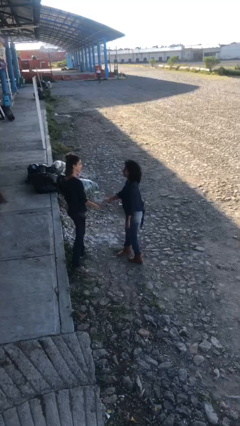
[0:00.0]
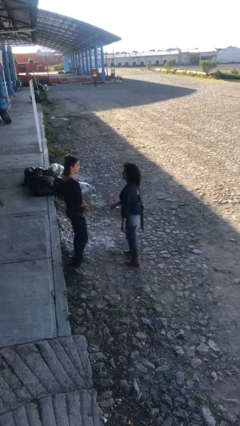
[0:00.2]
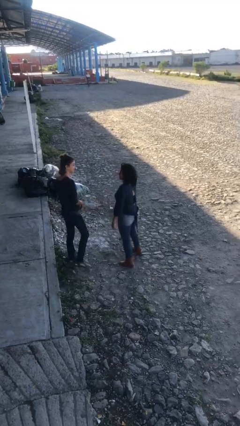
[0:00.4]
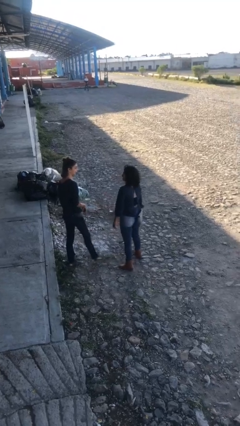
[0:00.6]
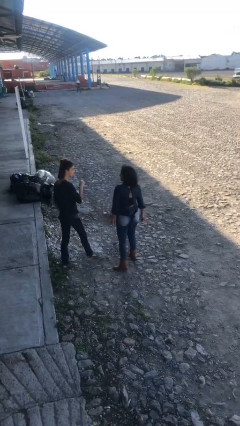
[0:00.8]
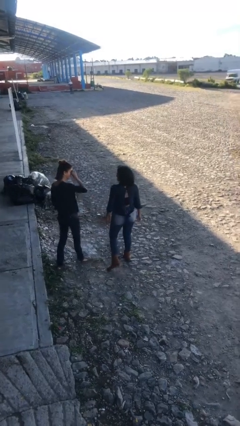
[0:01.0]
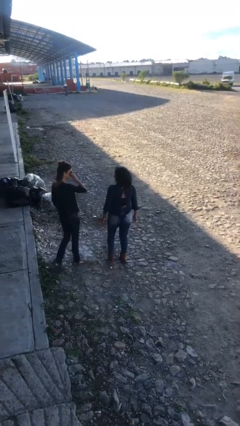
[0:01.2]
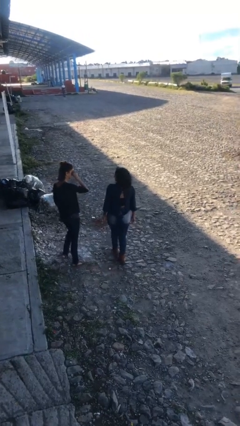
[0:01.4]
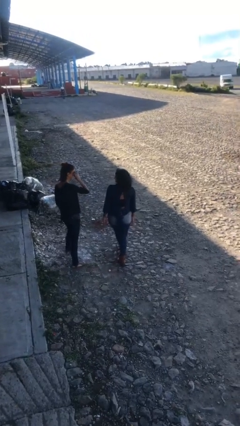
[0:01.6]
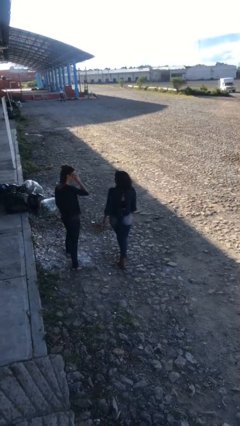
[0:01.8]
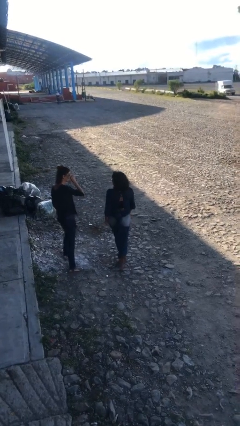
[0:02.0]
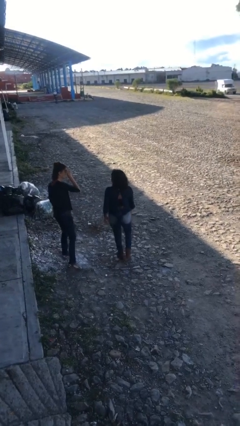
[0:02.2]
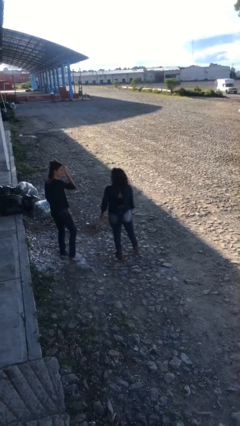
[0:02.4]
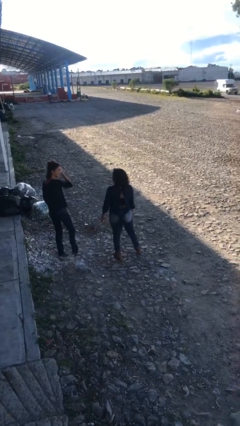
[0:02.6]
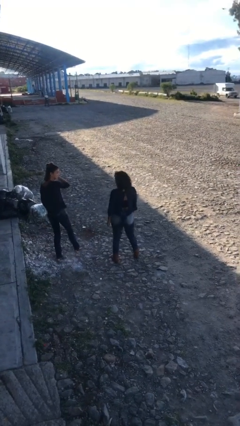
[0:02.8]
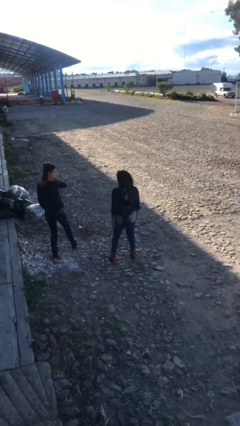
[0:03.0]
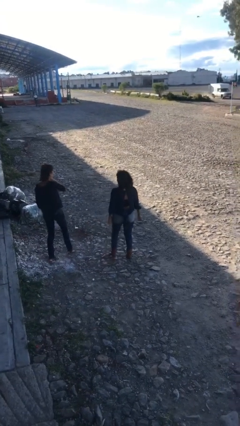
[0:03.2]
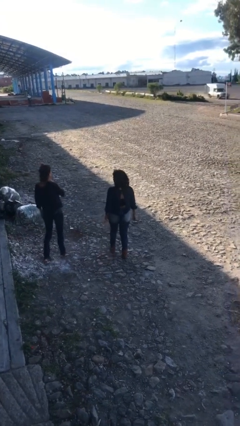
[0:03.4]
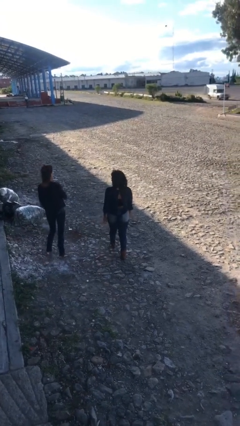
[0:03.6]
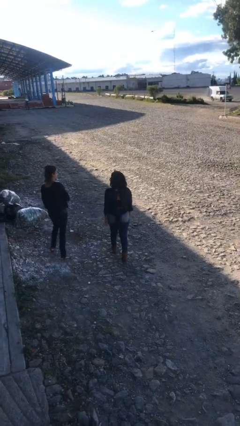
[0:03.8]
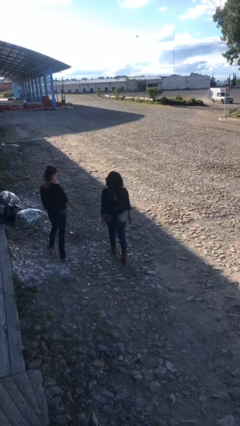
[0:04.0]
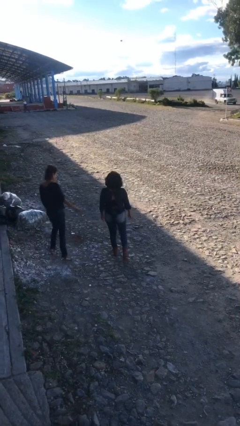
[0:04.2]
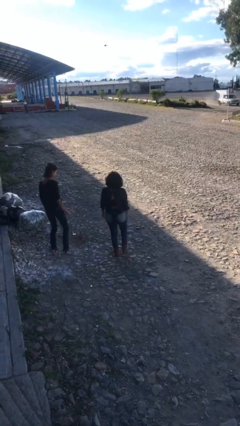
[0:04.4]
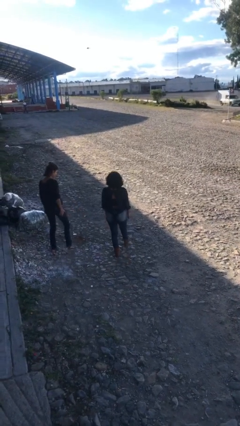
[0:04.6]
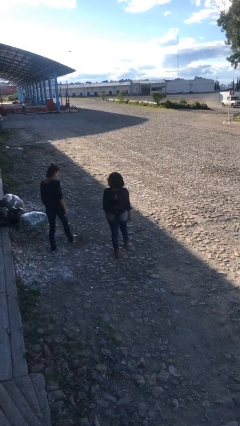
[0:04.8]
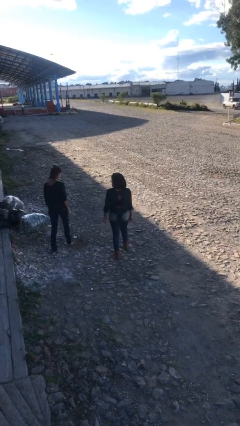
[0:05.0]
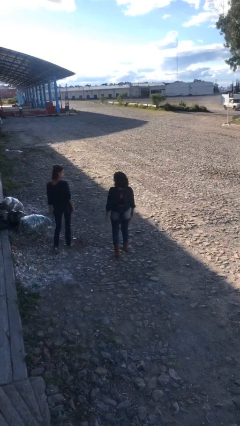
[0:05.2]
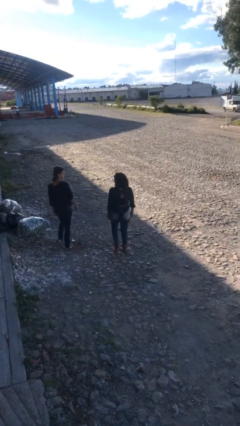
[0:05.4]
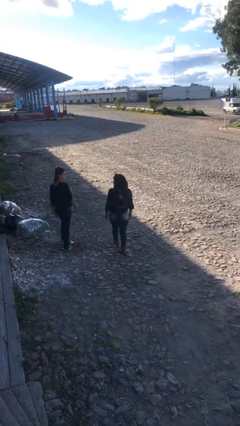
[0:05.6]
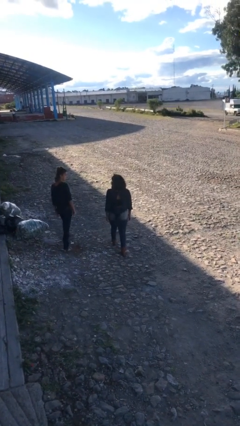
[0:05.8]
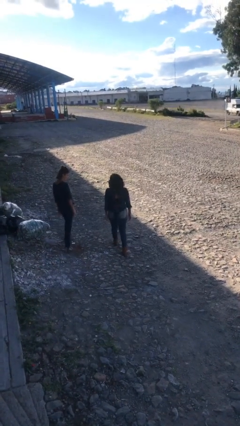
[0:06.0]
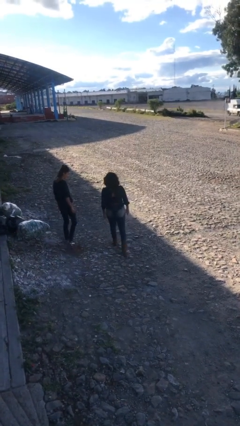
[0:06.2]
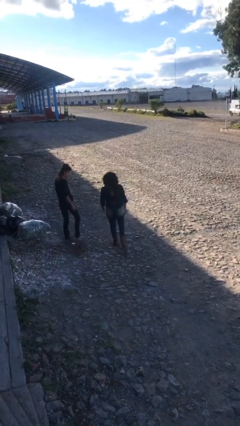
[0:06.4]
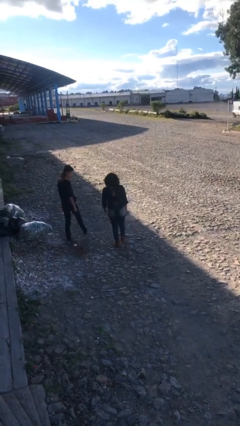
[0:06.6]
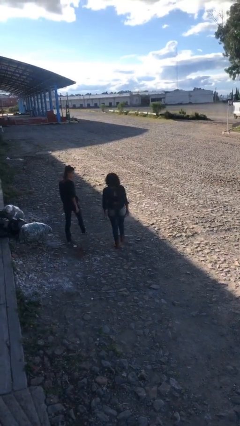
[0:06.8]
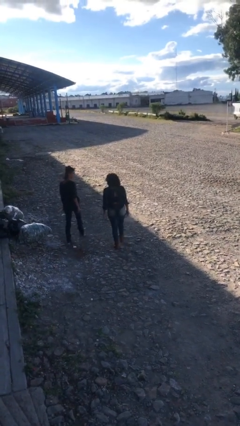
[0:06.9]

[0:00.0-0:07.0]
person talks to person

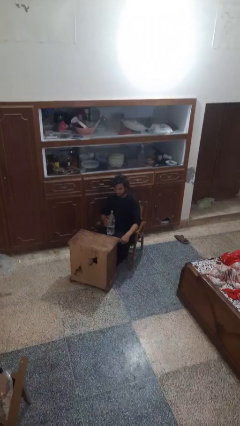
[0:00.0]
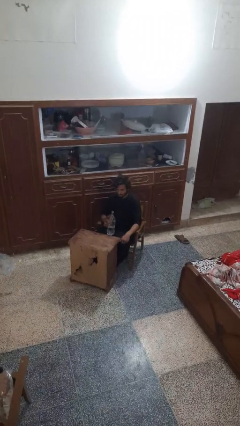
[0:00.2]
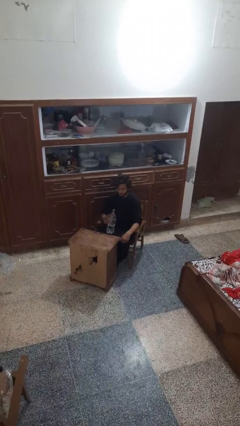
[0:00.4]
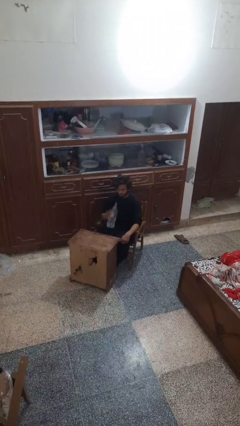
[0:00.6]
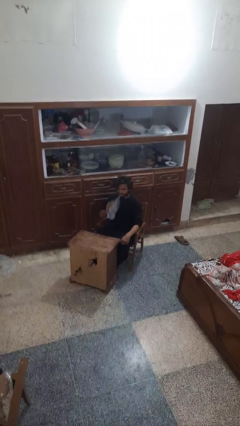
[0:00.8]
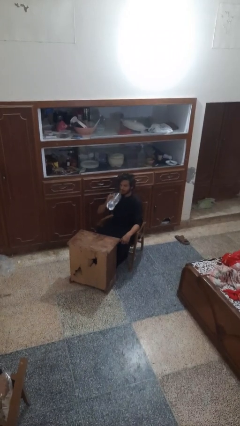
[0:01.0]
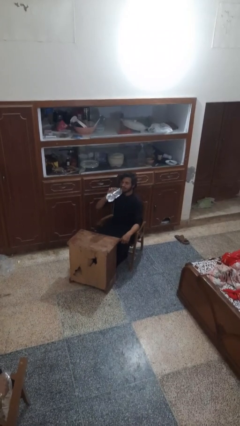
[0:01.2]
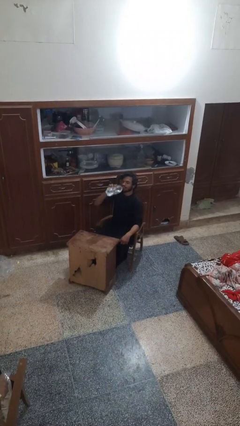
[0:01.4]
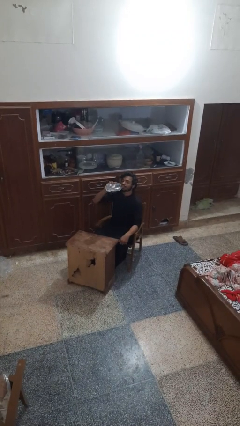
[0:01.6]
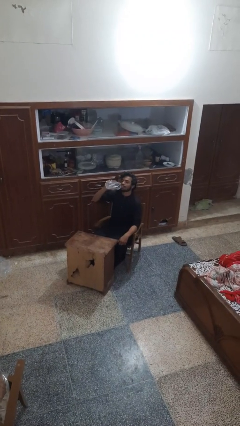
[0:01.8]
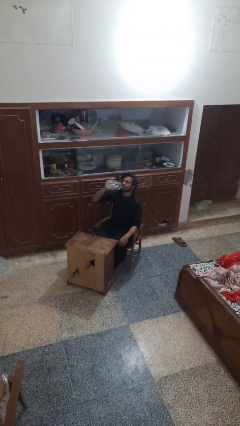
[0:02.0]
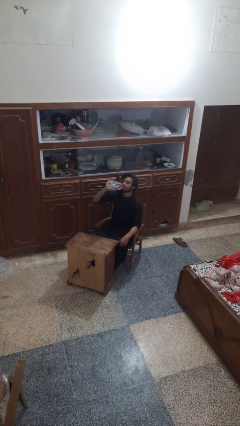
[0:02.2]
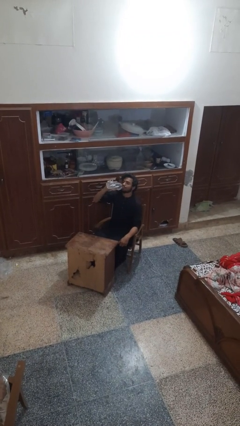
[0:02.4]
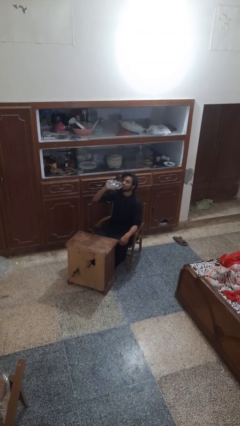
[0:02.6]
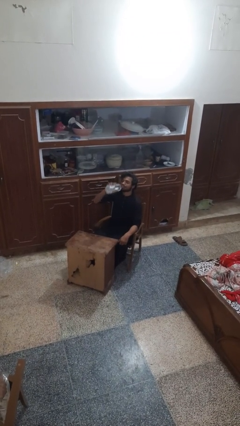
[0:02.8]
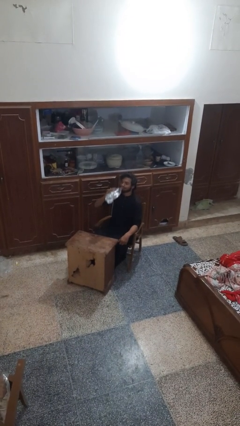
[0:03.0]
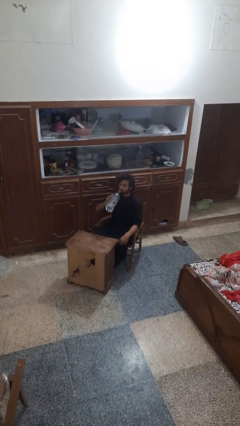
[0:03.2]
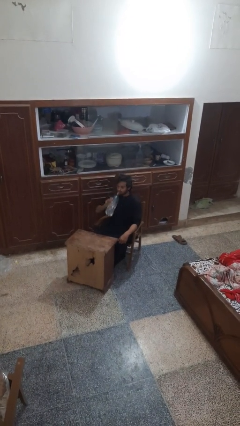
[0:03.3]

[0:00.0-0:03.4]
person drinks from bottle

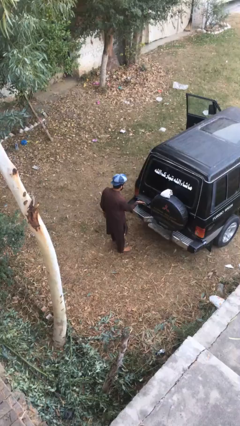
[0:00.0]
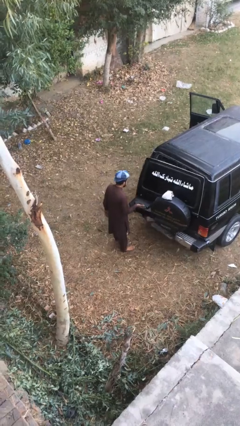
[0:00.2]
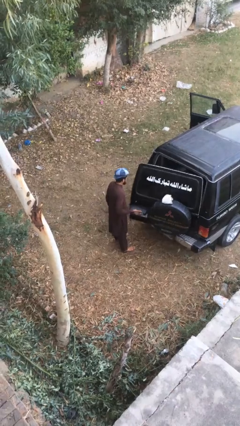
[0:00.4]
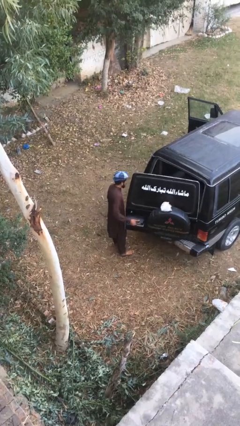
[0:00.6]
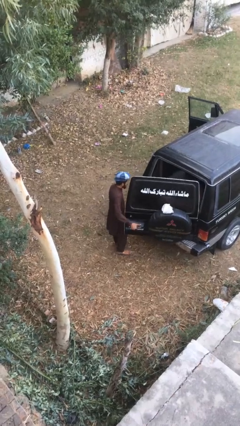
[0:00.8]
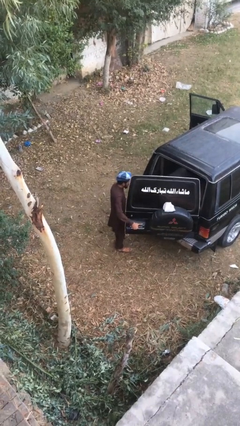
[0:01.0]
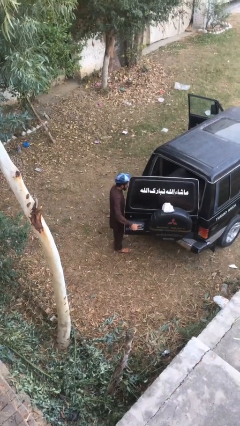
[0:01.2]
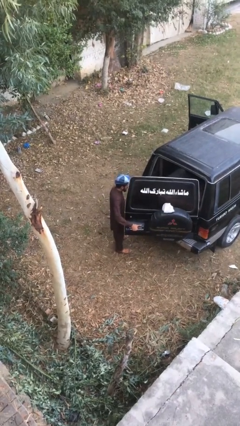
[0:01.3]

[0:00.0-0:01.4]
person opens car trunk

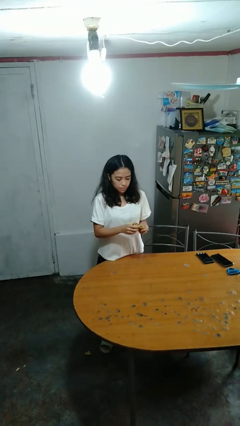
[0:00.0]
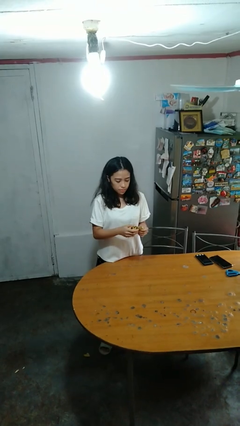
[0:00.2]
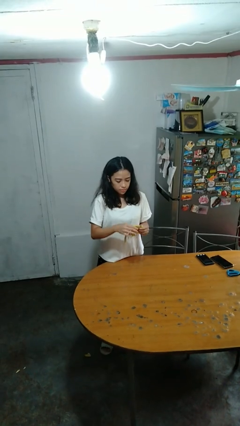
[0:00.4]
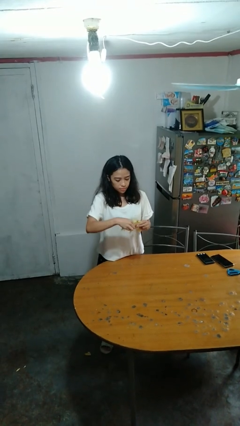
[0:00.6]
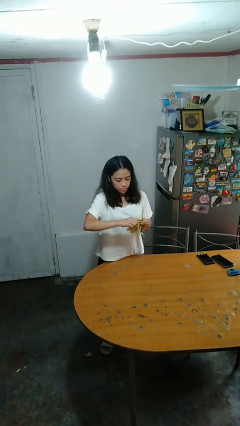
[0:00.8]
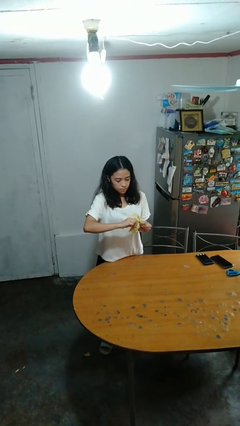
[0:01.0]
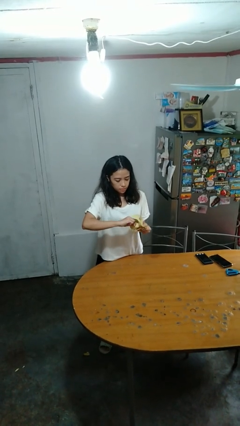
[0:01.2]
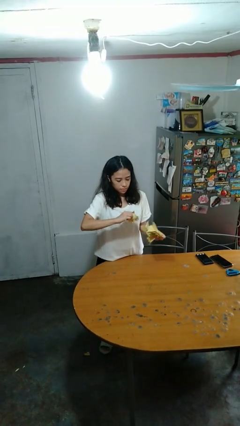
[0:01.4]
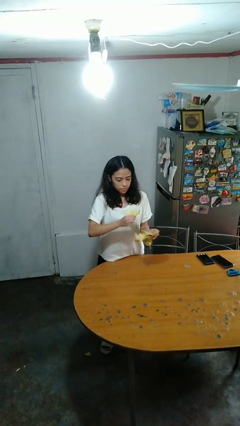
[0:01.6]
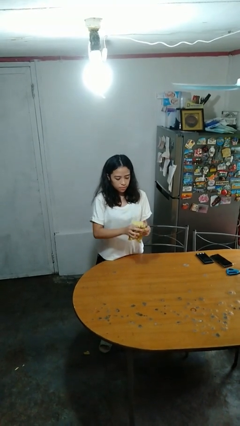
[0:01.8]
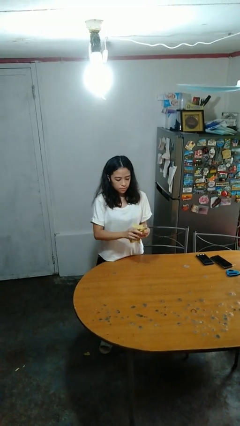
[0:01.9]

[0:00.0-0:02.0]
person tears paper

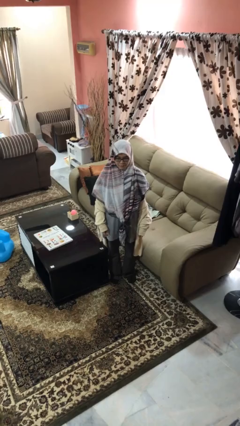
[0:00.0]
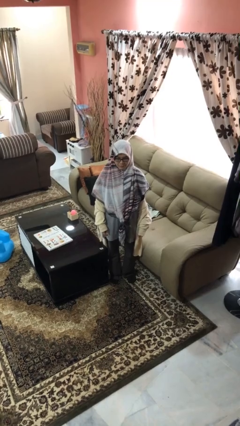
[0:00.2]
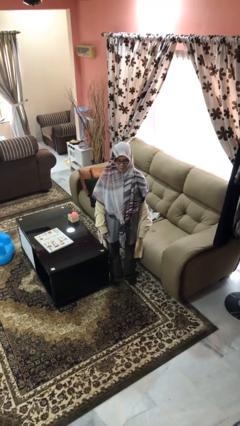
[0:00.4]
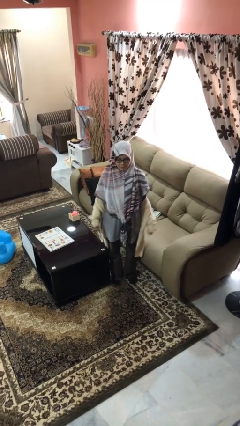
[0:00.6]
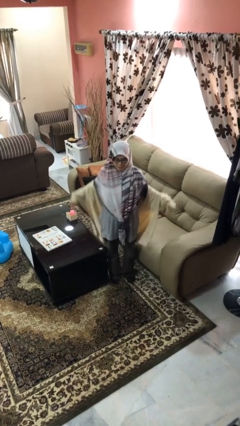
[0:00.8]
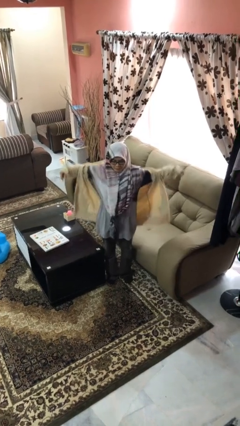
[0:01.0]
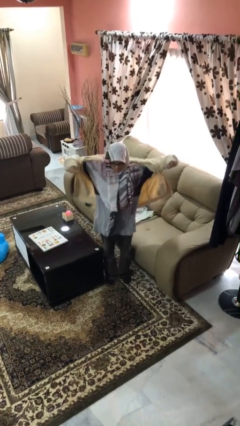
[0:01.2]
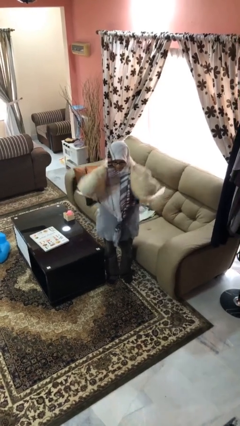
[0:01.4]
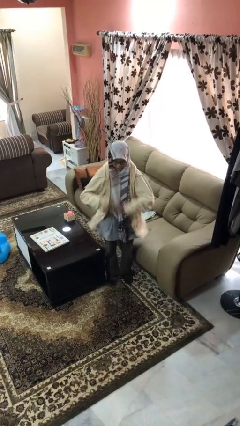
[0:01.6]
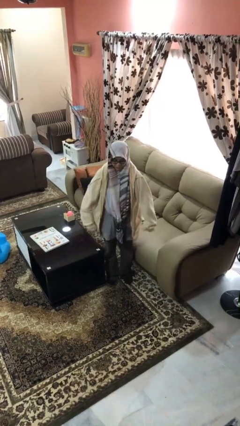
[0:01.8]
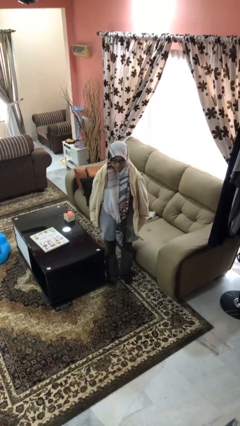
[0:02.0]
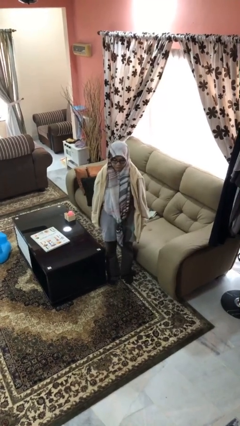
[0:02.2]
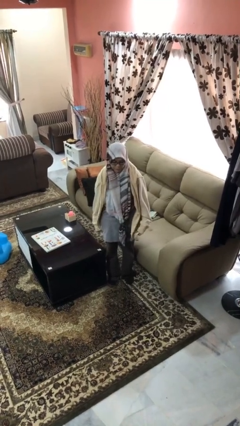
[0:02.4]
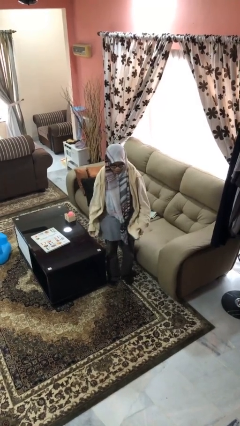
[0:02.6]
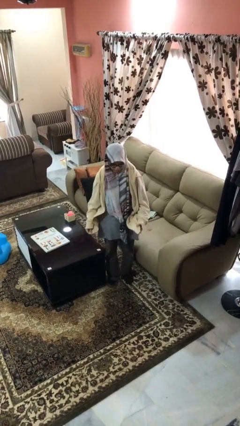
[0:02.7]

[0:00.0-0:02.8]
person puts on jacket

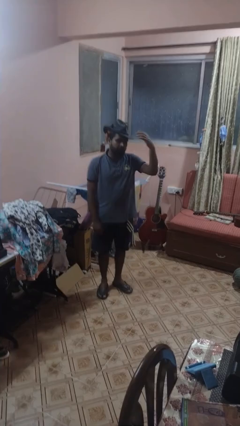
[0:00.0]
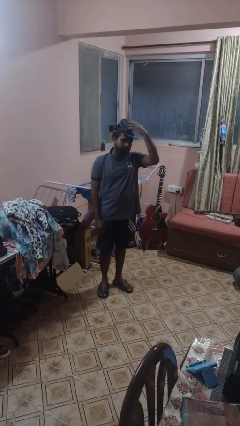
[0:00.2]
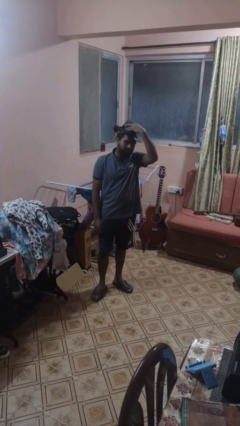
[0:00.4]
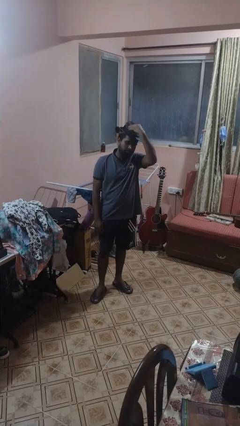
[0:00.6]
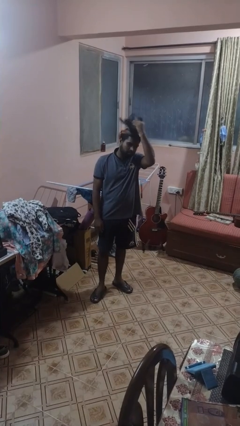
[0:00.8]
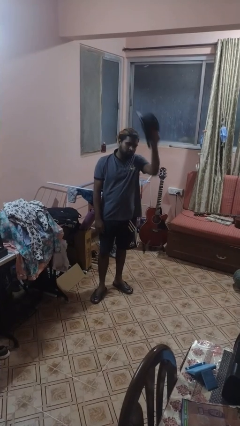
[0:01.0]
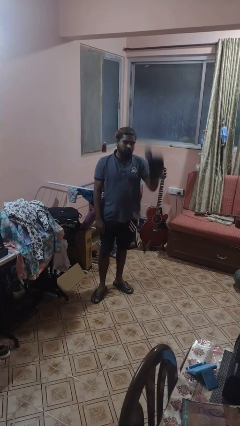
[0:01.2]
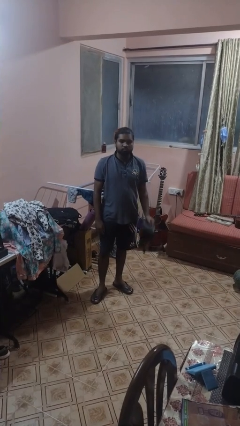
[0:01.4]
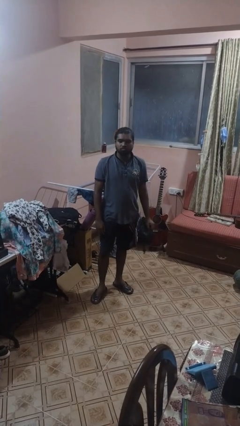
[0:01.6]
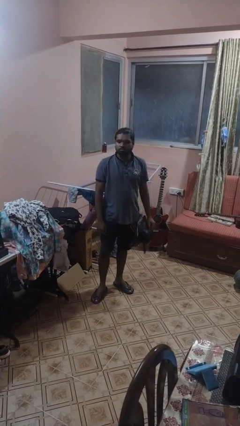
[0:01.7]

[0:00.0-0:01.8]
person takes off hat
